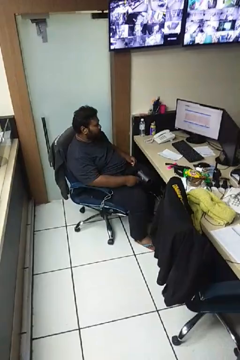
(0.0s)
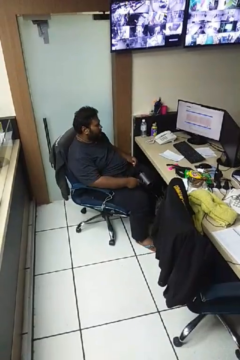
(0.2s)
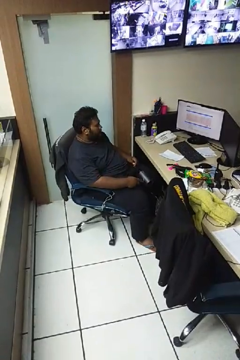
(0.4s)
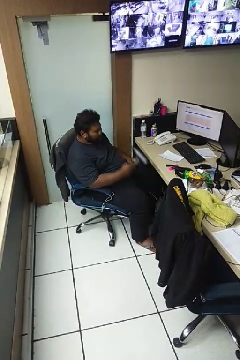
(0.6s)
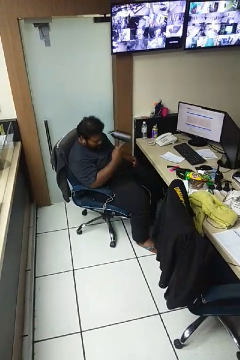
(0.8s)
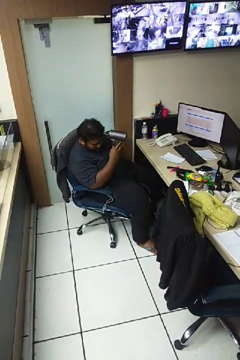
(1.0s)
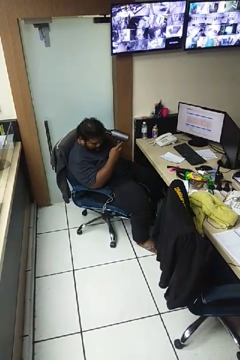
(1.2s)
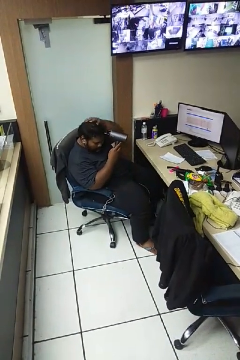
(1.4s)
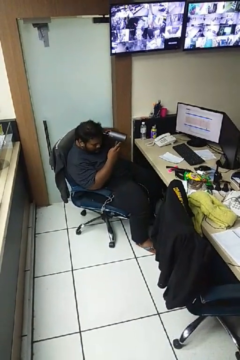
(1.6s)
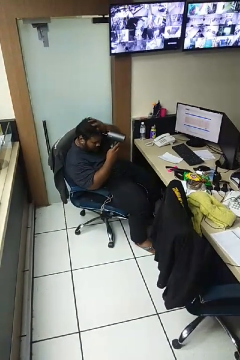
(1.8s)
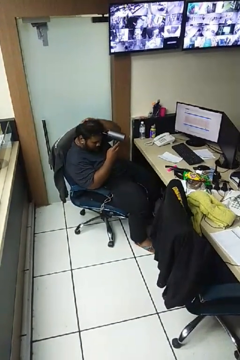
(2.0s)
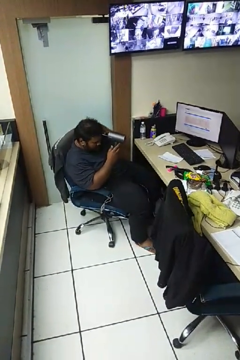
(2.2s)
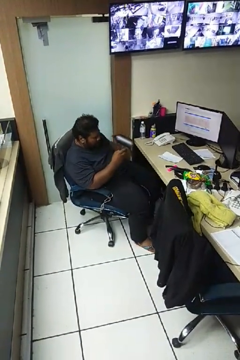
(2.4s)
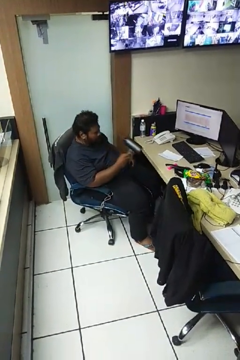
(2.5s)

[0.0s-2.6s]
person dries hair with hairdryer

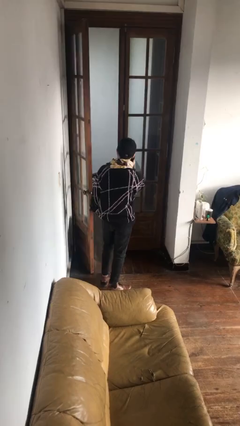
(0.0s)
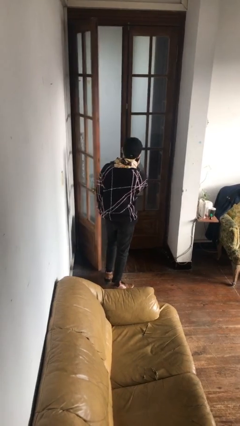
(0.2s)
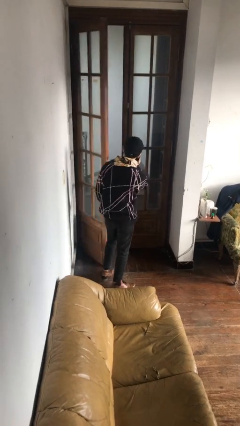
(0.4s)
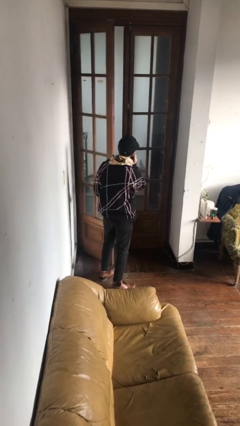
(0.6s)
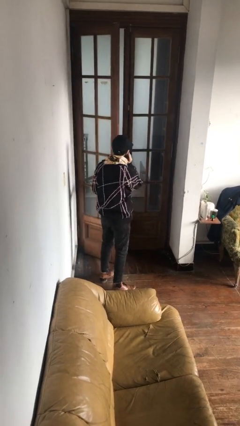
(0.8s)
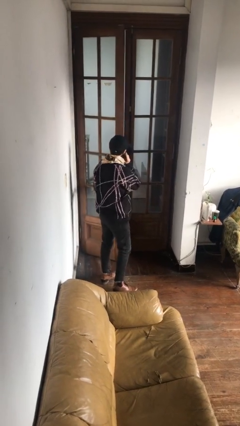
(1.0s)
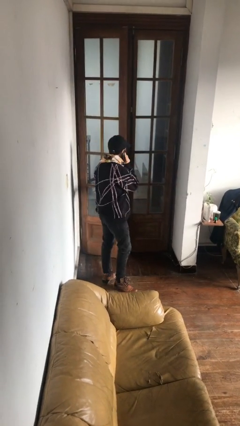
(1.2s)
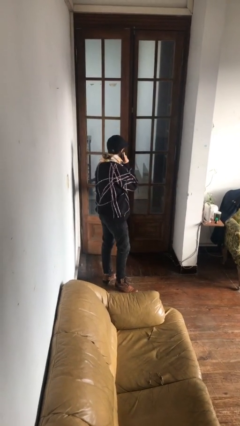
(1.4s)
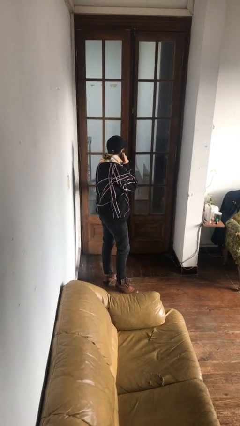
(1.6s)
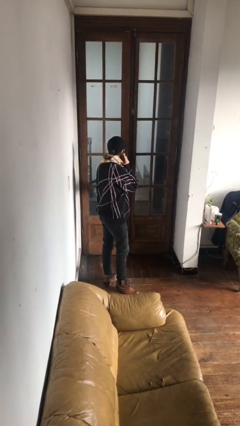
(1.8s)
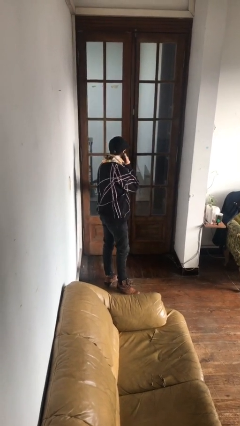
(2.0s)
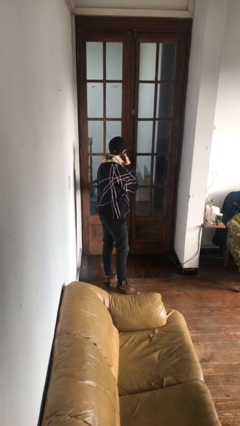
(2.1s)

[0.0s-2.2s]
person closes facility door

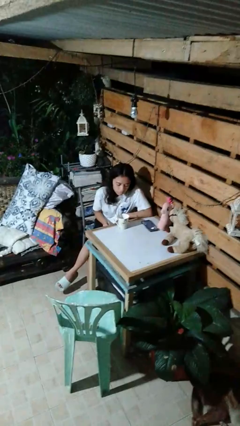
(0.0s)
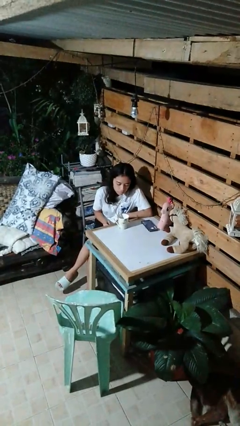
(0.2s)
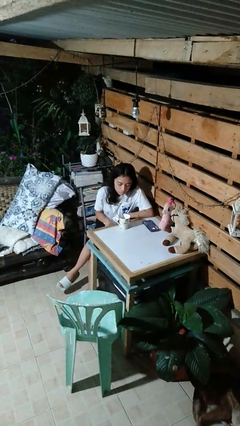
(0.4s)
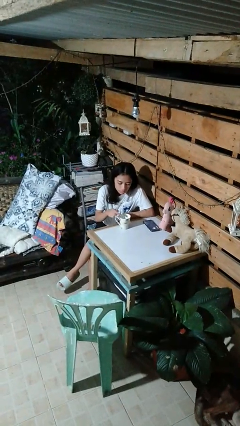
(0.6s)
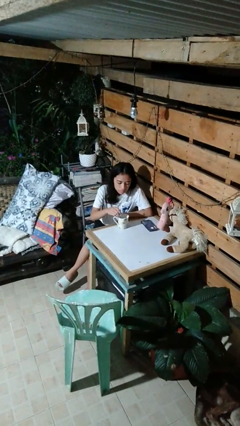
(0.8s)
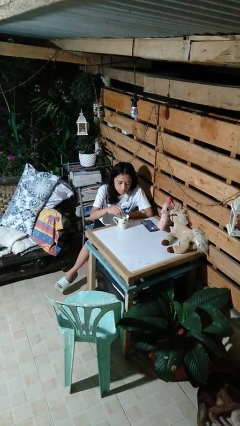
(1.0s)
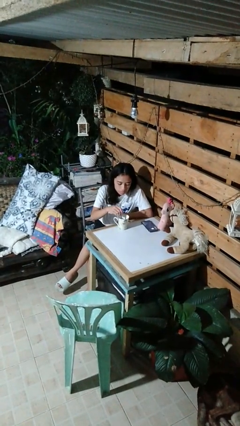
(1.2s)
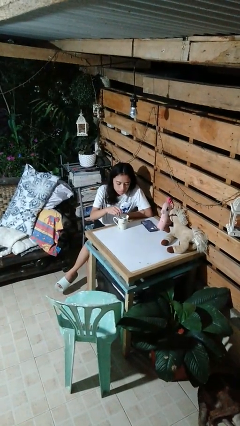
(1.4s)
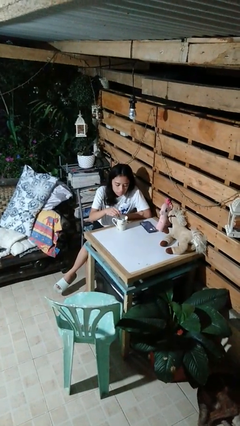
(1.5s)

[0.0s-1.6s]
person stirs mug

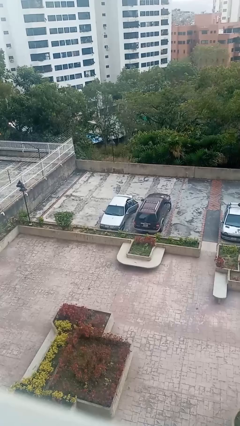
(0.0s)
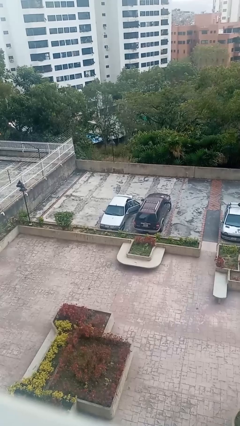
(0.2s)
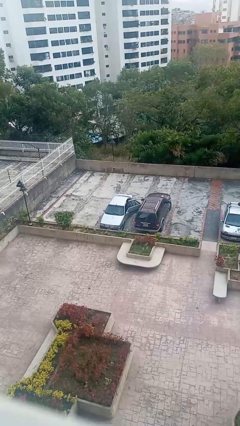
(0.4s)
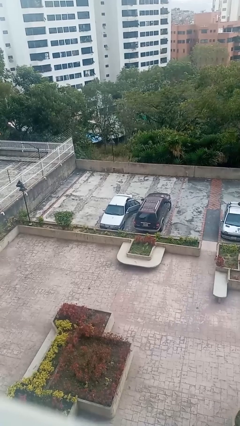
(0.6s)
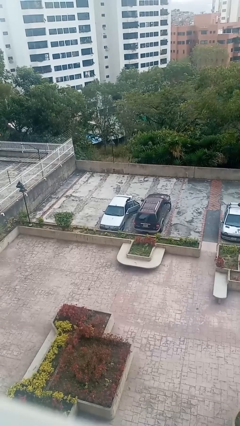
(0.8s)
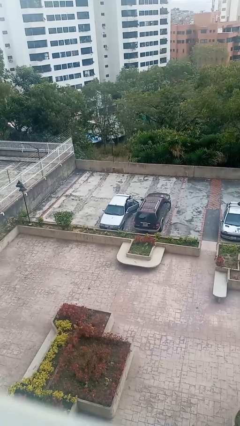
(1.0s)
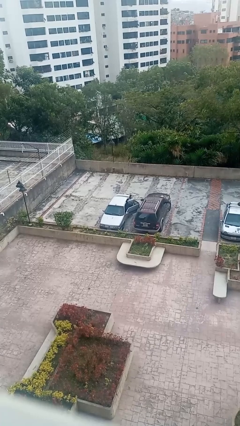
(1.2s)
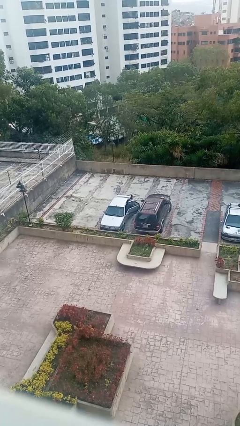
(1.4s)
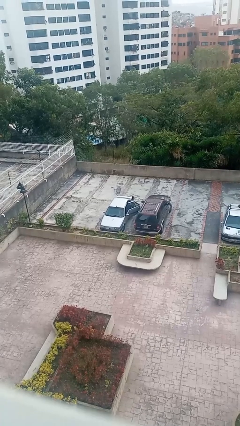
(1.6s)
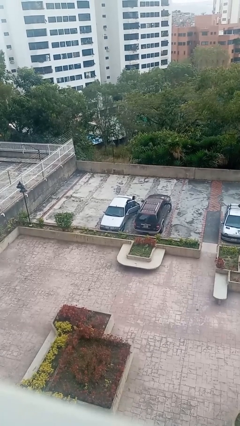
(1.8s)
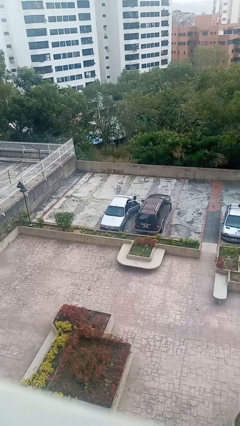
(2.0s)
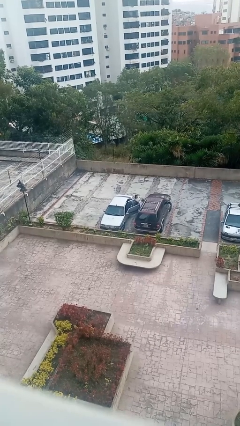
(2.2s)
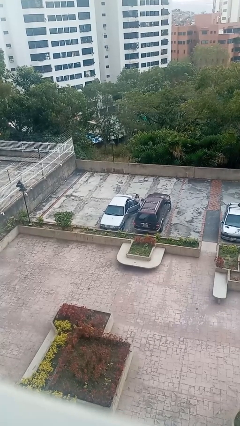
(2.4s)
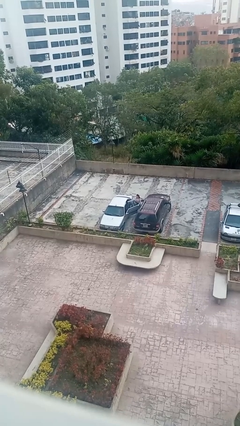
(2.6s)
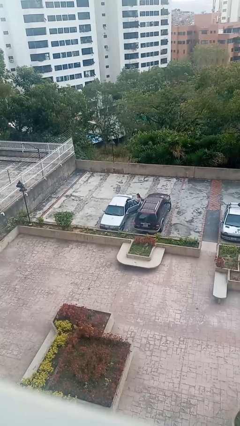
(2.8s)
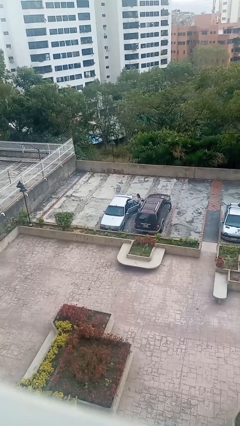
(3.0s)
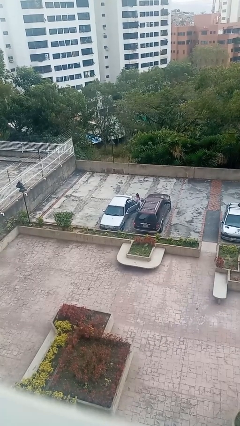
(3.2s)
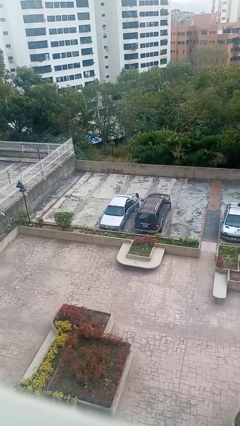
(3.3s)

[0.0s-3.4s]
car drops off person

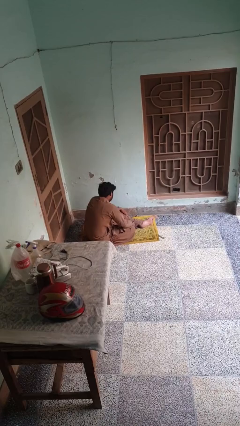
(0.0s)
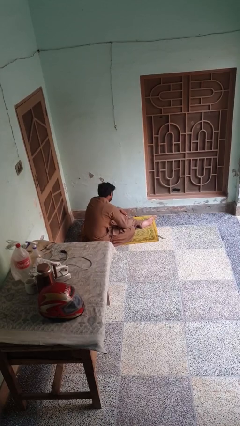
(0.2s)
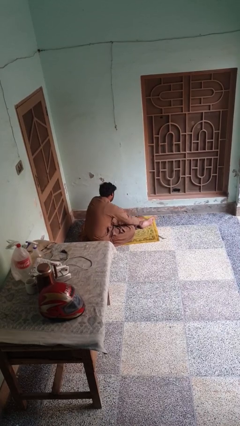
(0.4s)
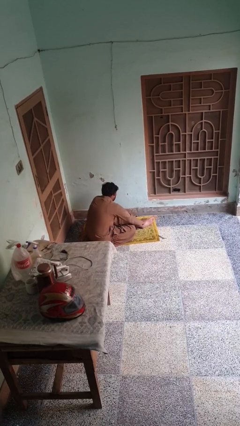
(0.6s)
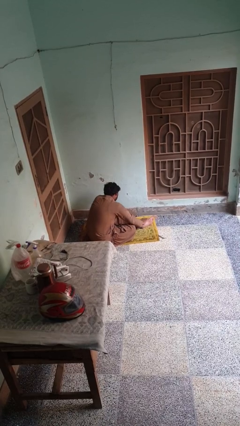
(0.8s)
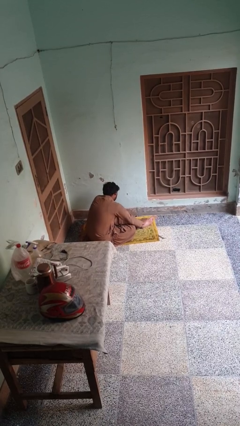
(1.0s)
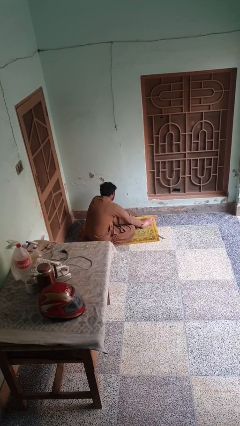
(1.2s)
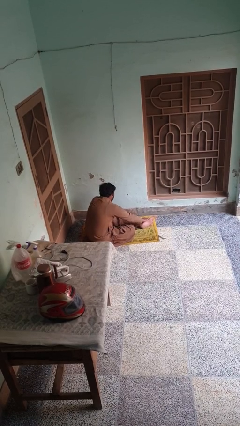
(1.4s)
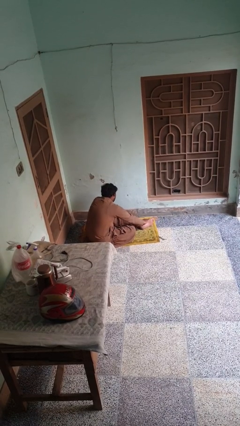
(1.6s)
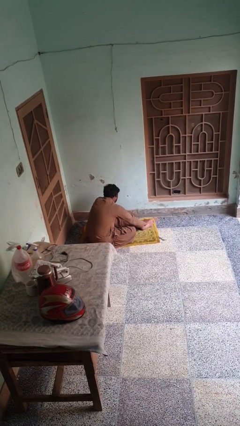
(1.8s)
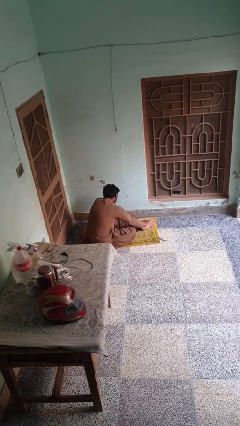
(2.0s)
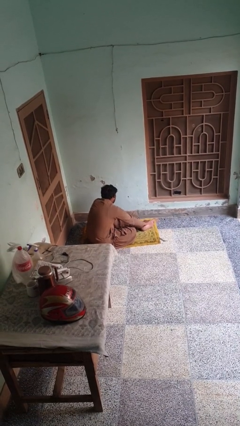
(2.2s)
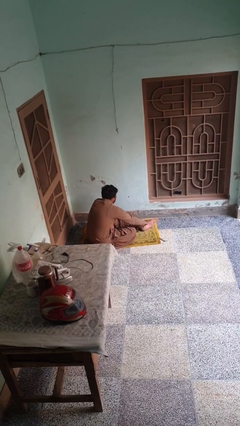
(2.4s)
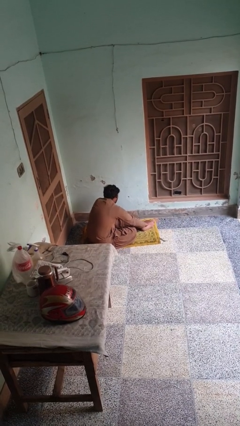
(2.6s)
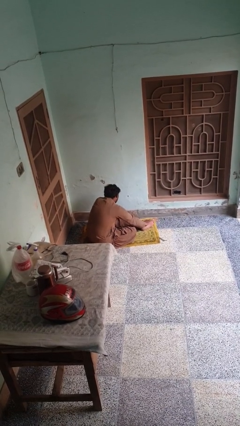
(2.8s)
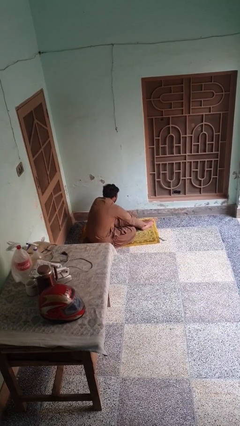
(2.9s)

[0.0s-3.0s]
person rubs foot

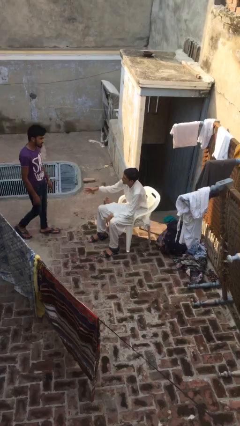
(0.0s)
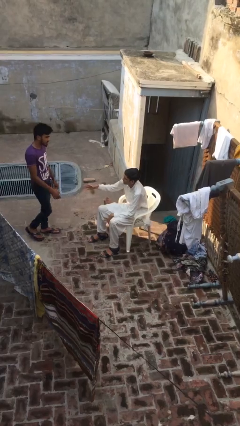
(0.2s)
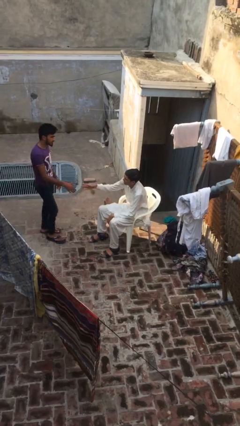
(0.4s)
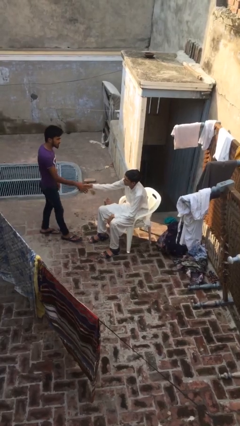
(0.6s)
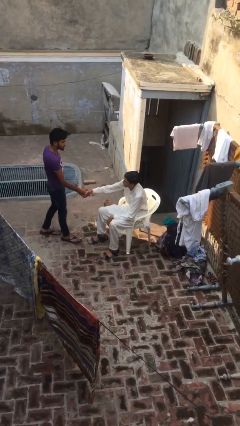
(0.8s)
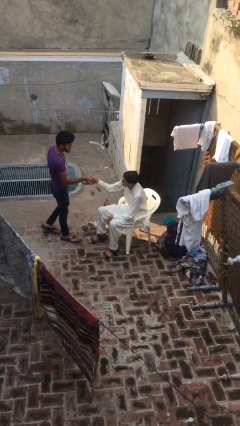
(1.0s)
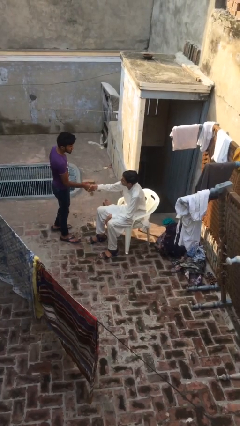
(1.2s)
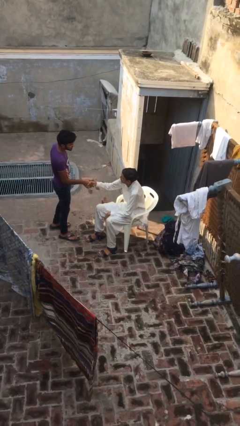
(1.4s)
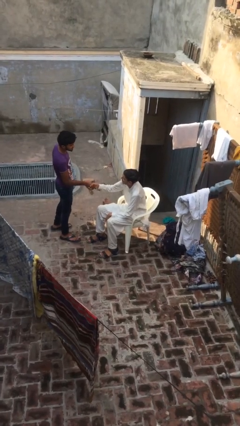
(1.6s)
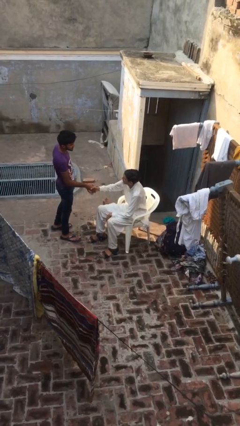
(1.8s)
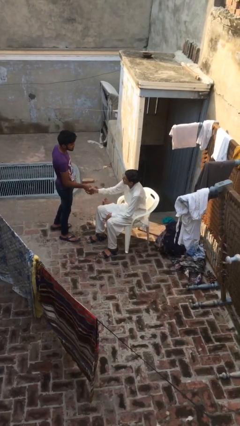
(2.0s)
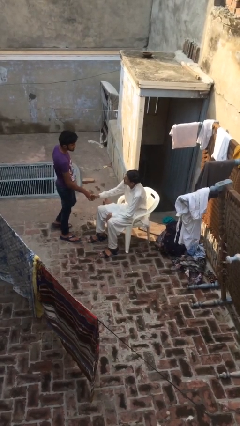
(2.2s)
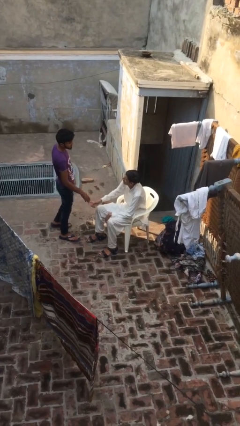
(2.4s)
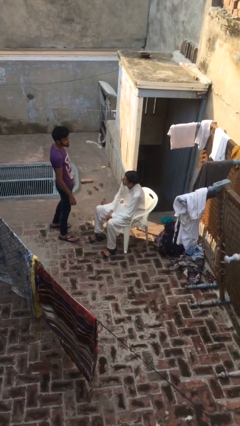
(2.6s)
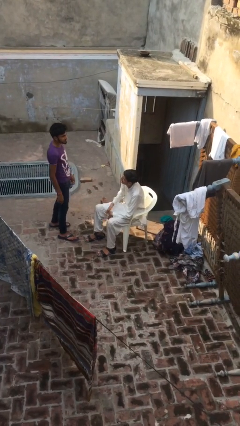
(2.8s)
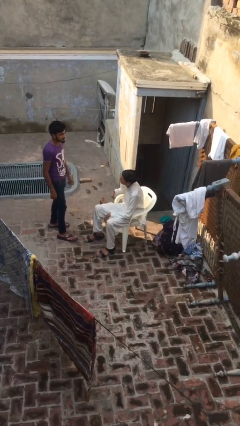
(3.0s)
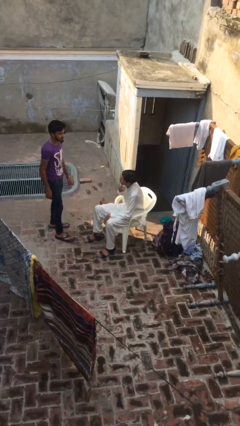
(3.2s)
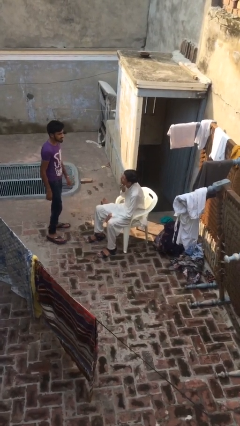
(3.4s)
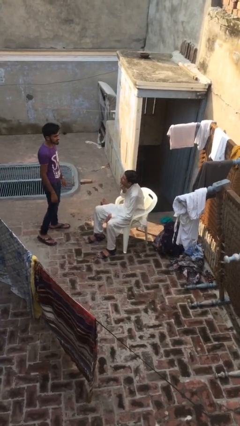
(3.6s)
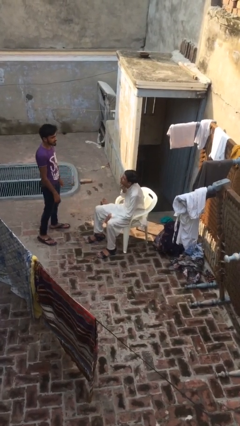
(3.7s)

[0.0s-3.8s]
person shakes hand

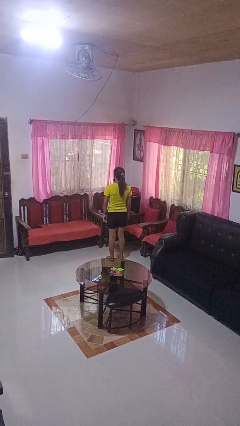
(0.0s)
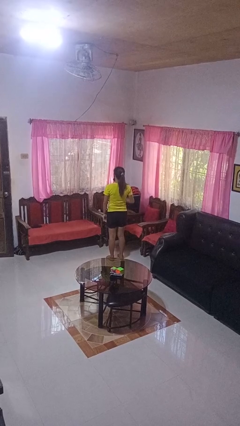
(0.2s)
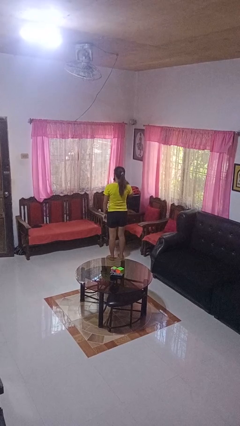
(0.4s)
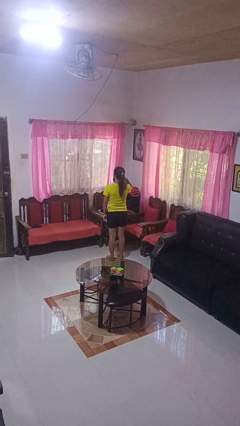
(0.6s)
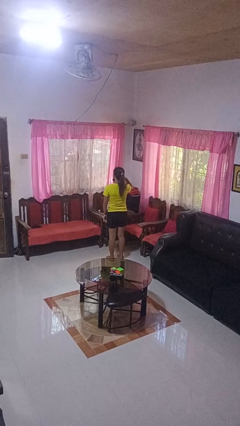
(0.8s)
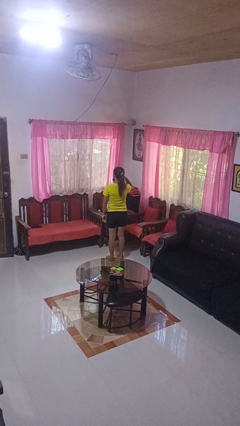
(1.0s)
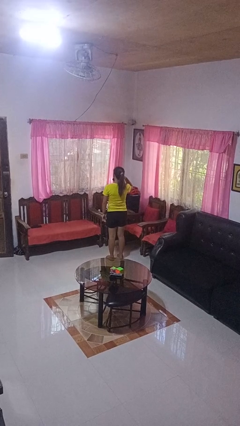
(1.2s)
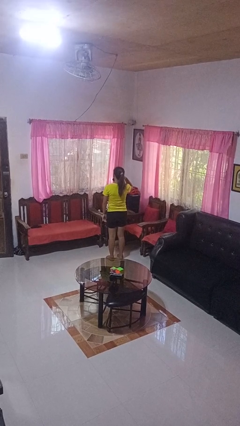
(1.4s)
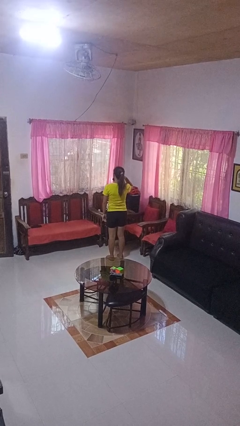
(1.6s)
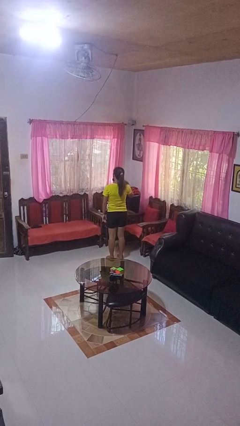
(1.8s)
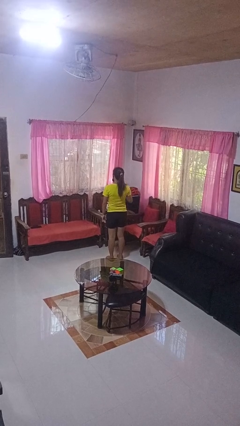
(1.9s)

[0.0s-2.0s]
person gestures call me
